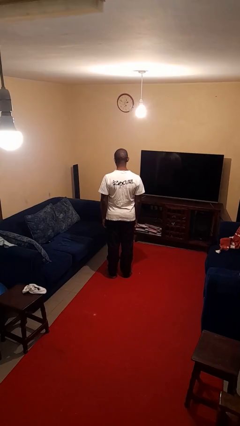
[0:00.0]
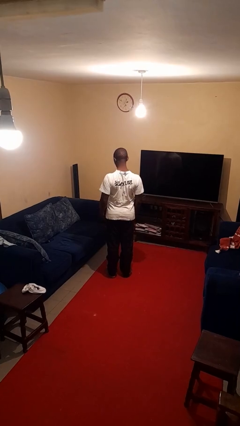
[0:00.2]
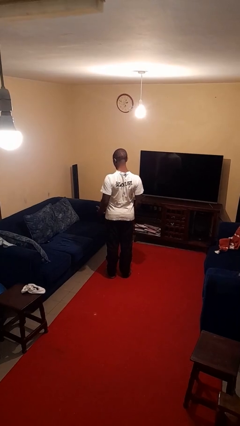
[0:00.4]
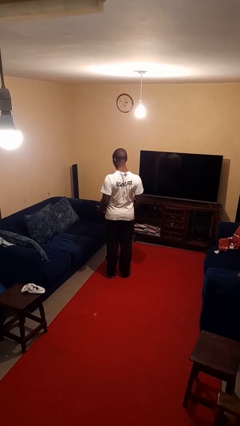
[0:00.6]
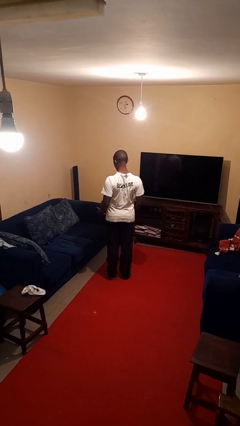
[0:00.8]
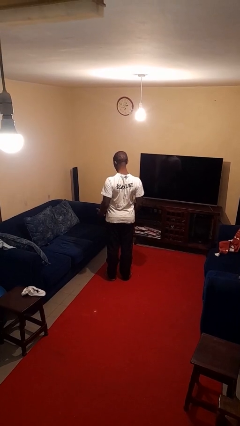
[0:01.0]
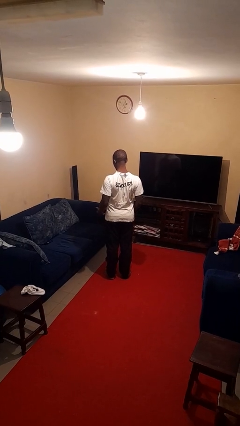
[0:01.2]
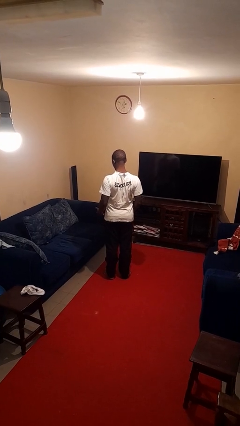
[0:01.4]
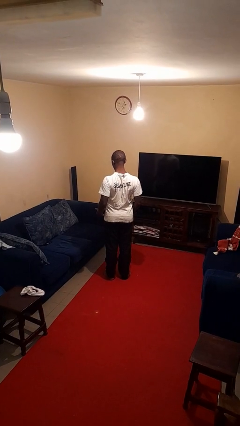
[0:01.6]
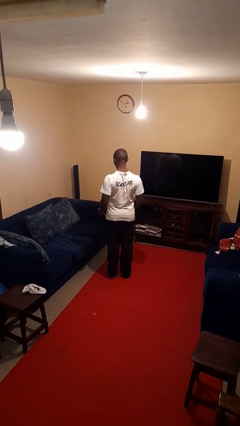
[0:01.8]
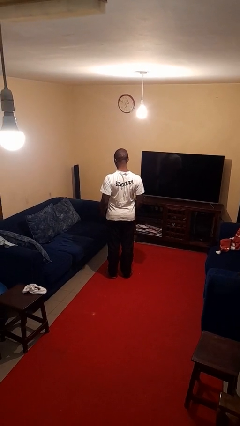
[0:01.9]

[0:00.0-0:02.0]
person shrugs

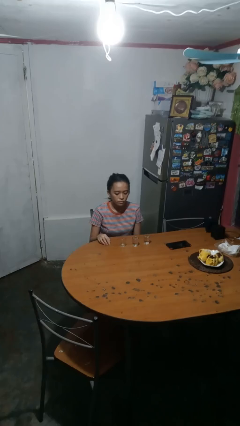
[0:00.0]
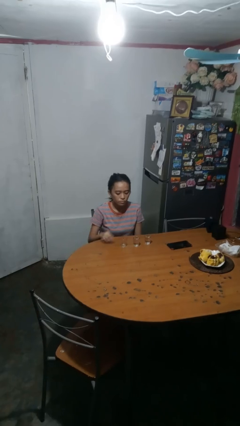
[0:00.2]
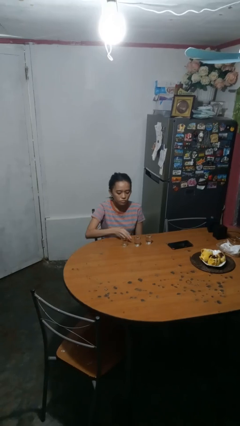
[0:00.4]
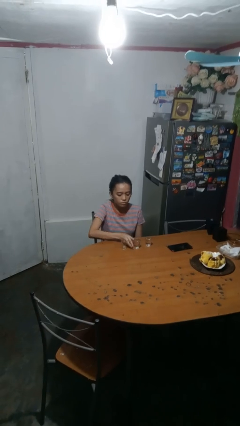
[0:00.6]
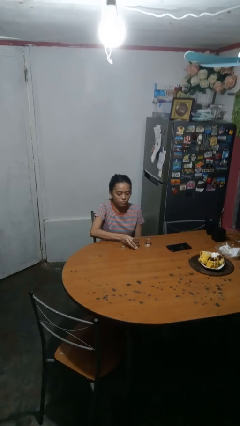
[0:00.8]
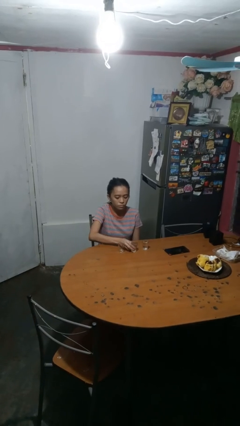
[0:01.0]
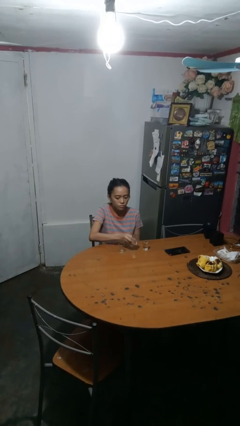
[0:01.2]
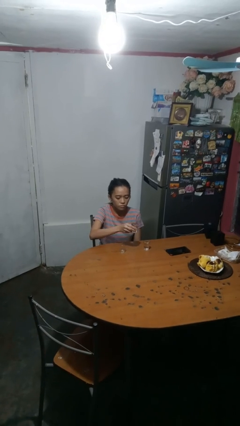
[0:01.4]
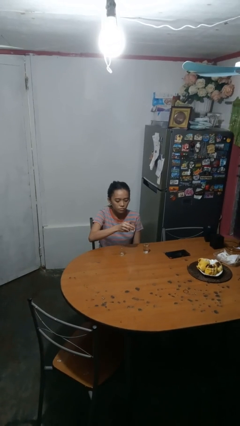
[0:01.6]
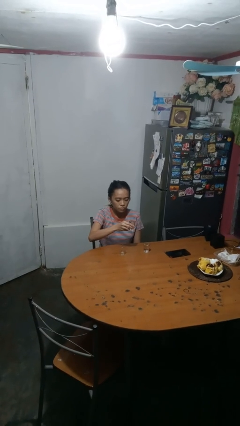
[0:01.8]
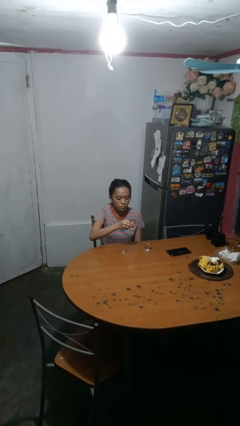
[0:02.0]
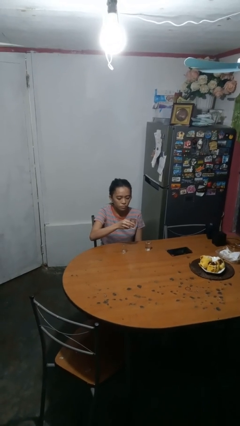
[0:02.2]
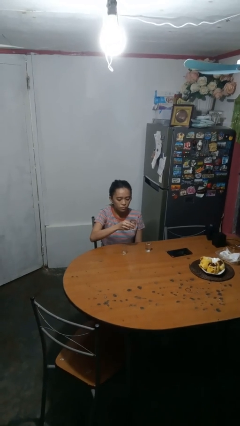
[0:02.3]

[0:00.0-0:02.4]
person picks up object from table

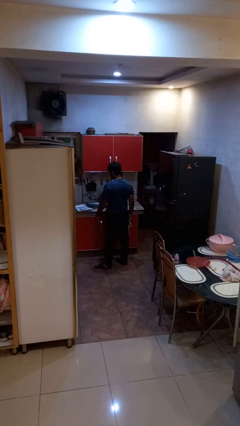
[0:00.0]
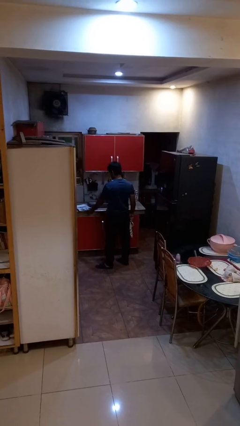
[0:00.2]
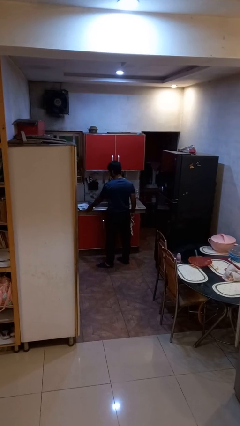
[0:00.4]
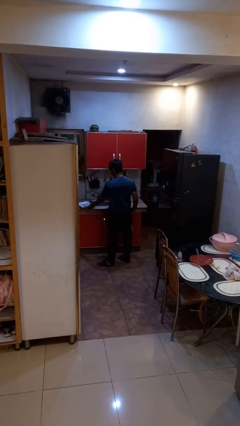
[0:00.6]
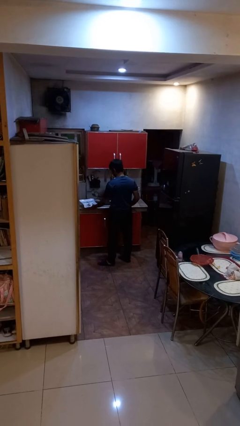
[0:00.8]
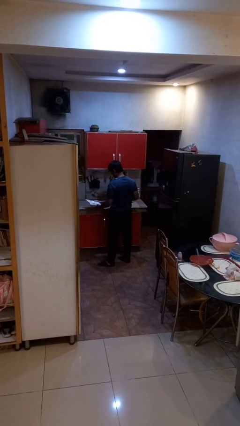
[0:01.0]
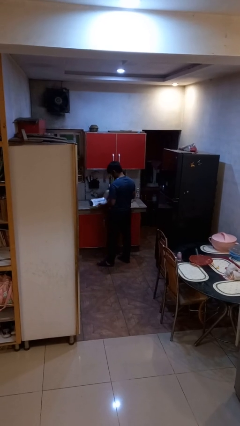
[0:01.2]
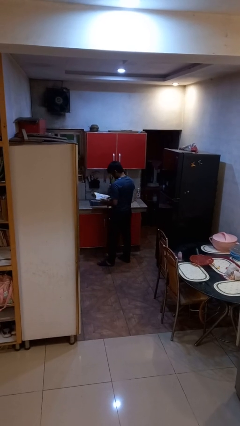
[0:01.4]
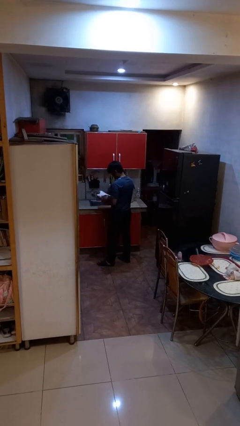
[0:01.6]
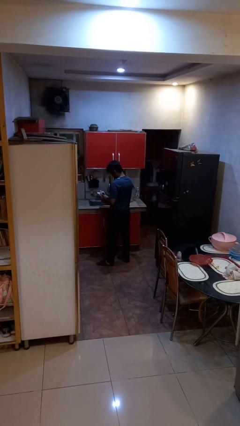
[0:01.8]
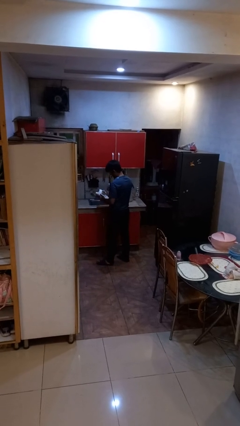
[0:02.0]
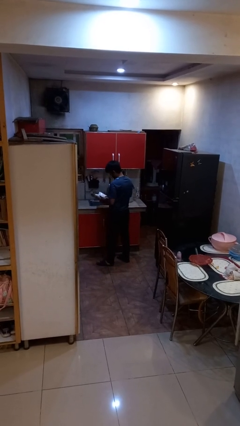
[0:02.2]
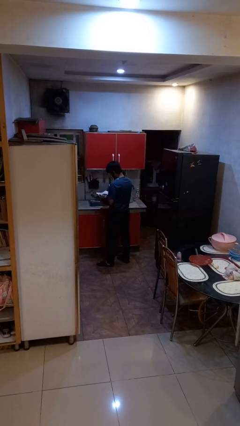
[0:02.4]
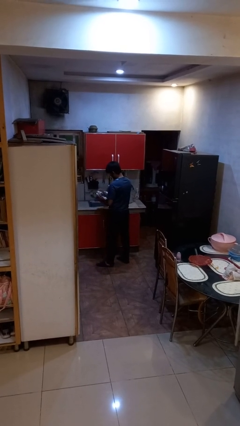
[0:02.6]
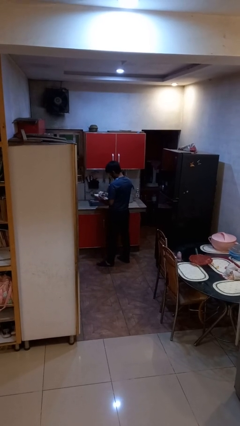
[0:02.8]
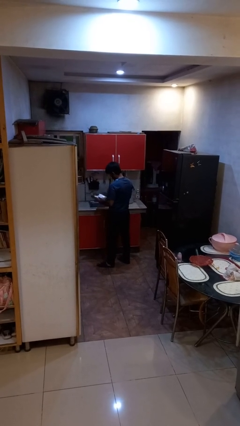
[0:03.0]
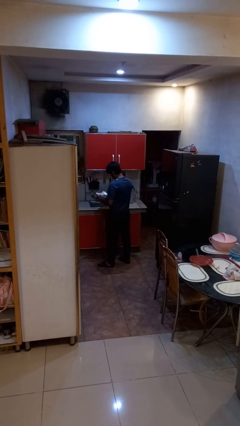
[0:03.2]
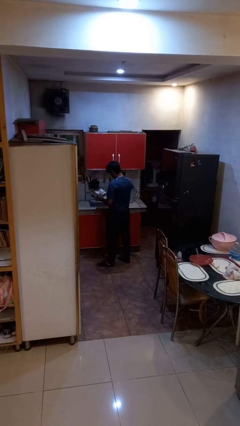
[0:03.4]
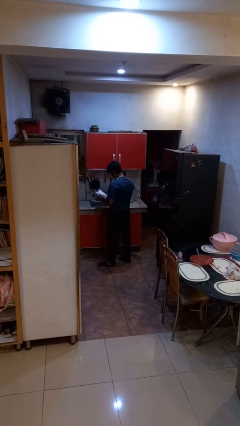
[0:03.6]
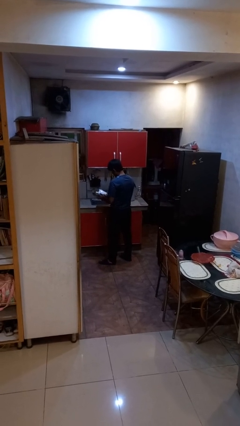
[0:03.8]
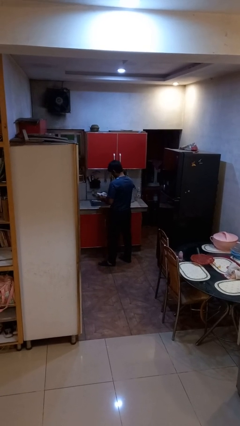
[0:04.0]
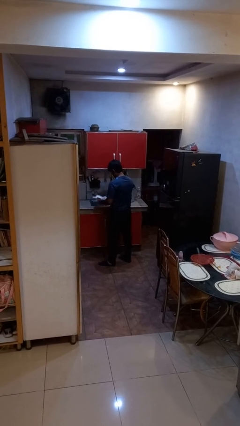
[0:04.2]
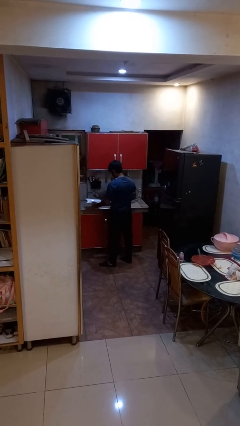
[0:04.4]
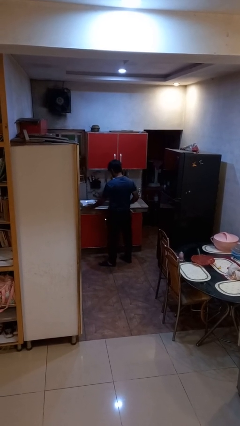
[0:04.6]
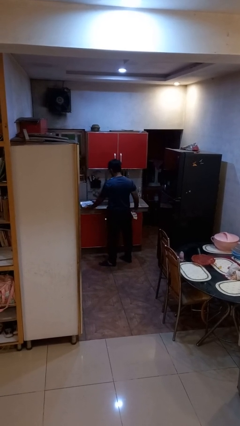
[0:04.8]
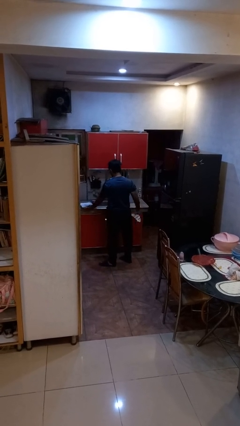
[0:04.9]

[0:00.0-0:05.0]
person dries dish

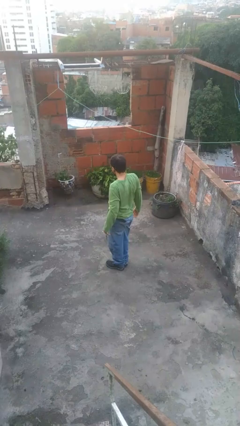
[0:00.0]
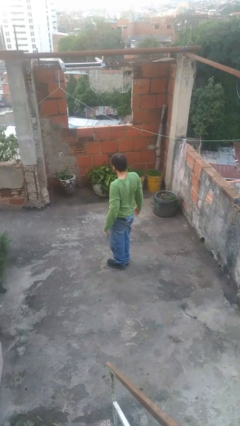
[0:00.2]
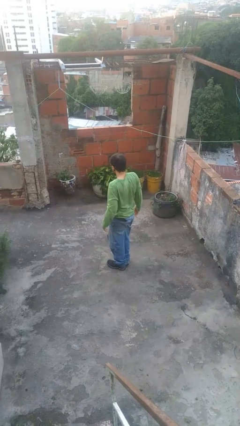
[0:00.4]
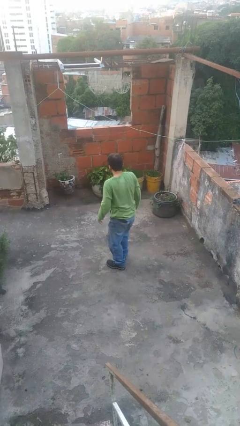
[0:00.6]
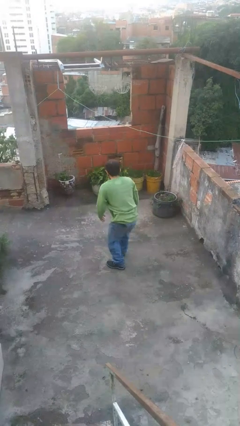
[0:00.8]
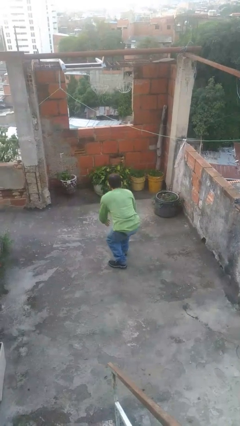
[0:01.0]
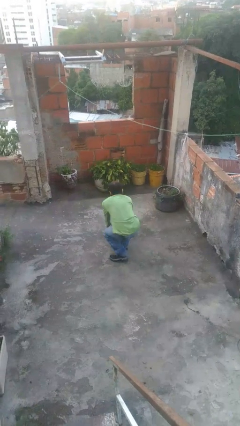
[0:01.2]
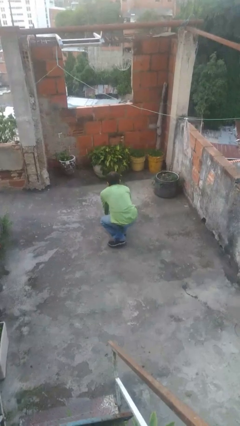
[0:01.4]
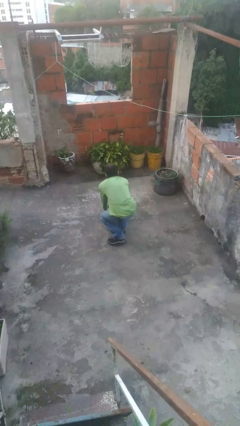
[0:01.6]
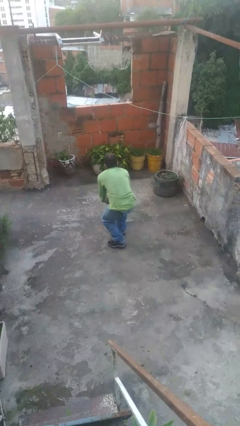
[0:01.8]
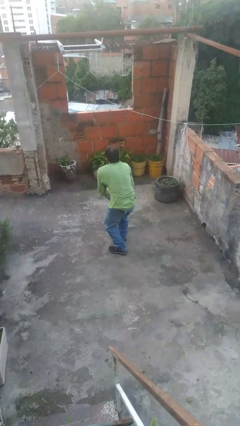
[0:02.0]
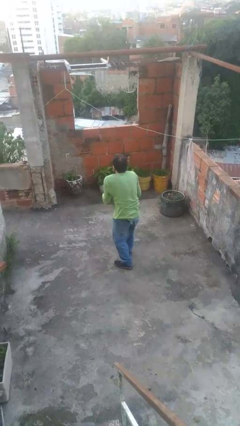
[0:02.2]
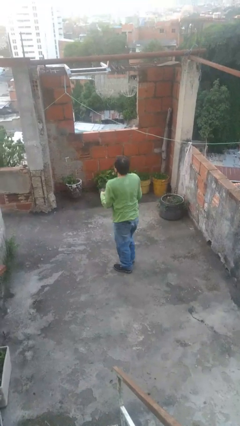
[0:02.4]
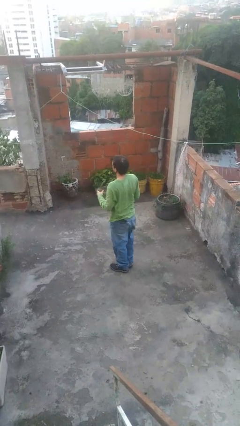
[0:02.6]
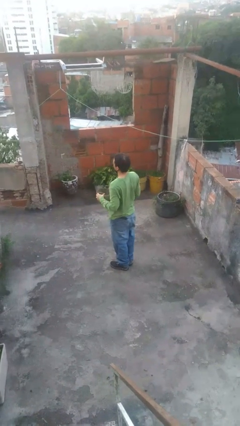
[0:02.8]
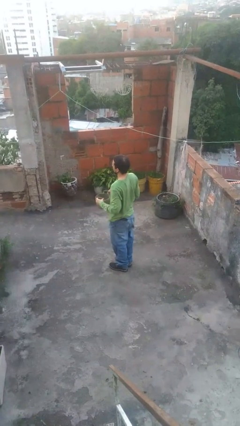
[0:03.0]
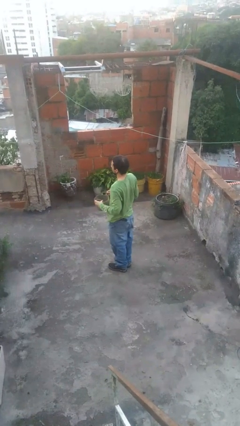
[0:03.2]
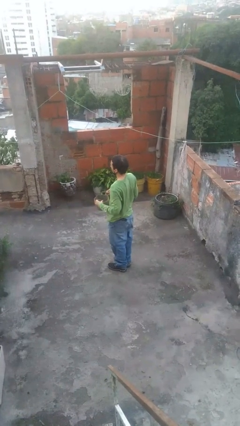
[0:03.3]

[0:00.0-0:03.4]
person picks up object from floor

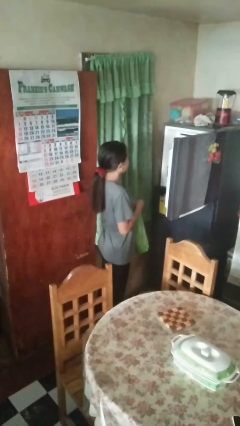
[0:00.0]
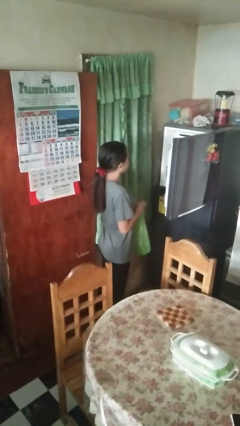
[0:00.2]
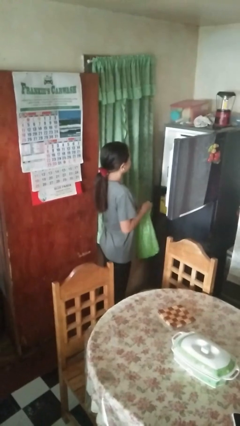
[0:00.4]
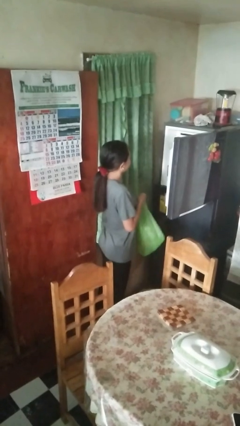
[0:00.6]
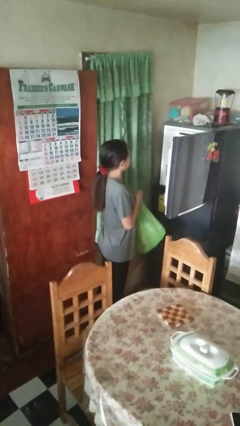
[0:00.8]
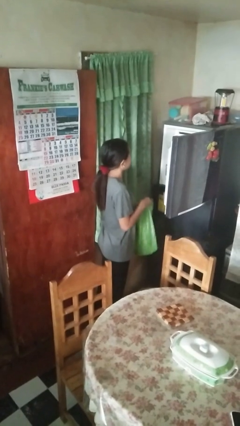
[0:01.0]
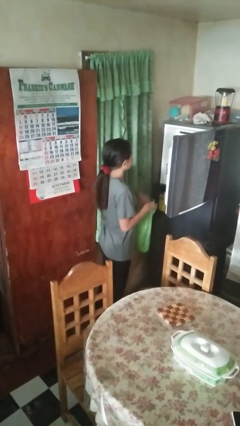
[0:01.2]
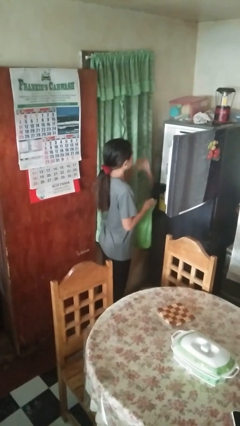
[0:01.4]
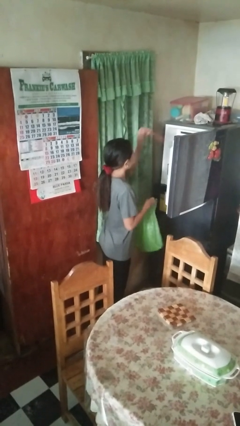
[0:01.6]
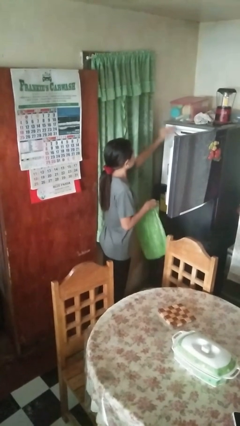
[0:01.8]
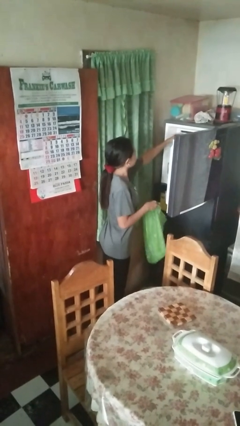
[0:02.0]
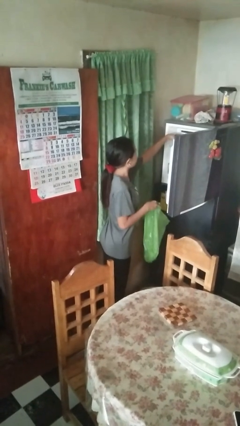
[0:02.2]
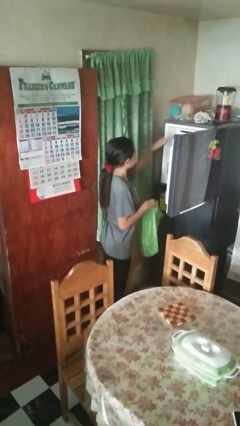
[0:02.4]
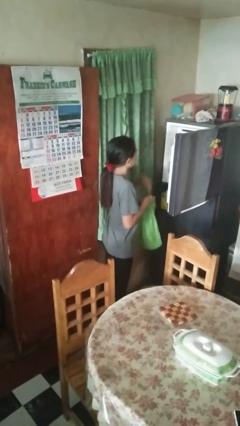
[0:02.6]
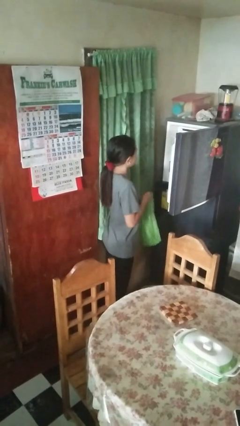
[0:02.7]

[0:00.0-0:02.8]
person loads groceries into refrigerator

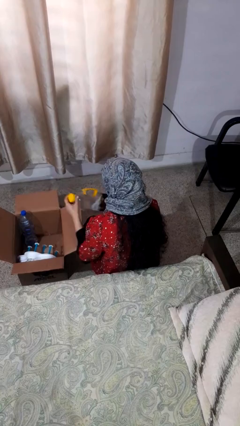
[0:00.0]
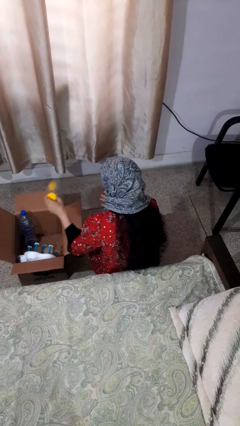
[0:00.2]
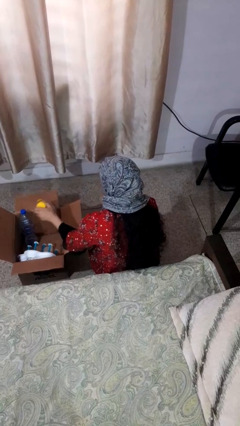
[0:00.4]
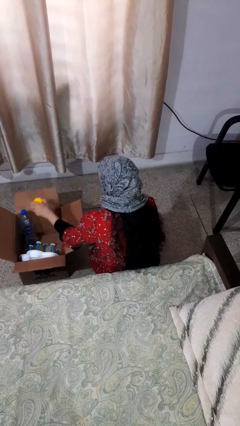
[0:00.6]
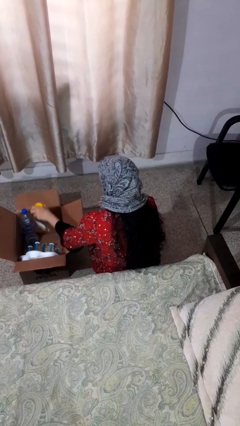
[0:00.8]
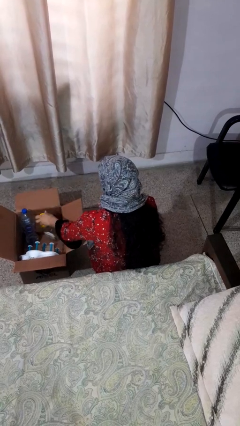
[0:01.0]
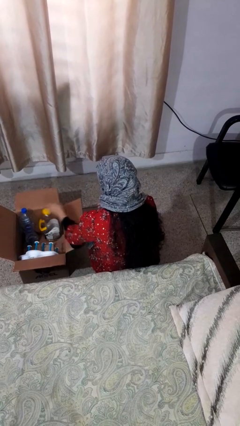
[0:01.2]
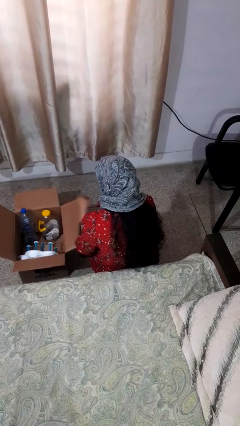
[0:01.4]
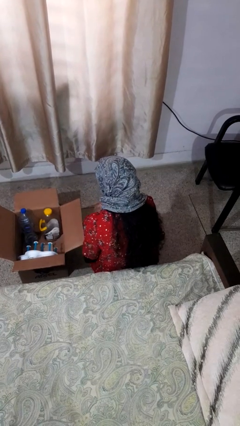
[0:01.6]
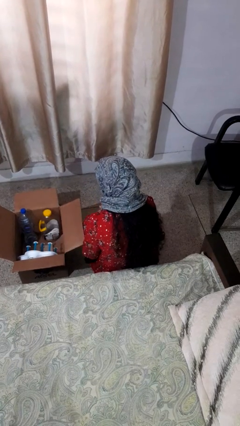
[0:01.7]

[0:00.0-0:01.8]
person puts object into box

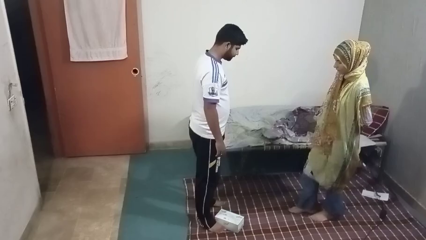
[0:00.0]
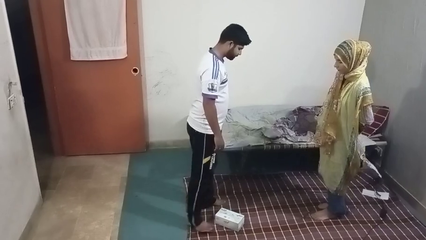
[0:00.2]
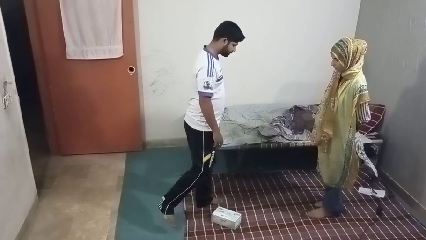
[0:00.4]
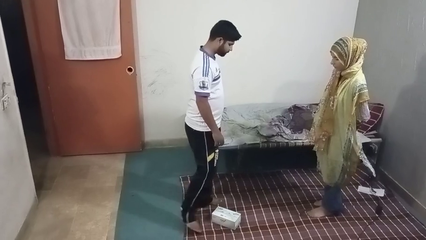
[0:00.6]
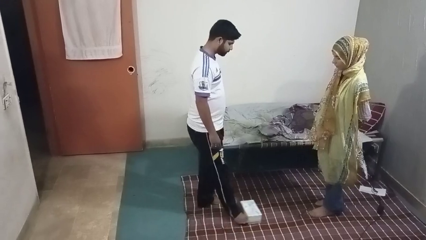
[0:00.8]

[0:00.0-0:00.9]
person kicks object to person
